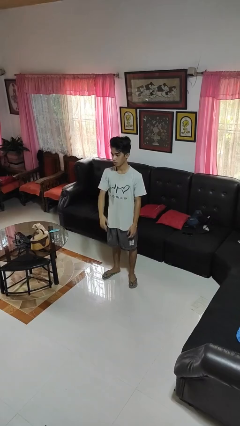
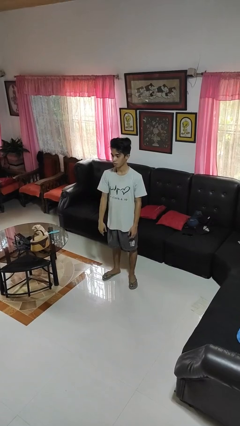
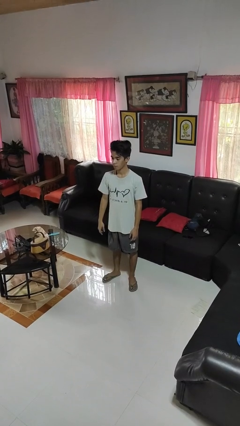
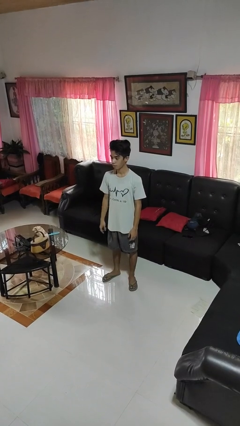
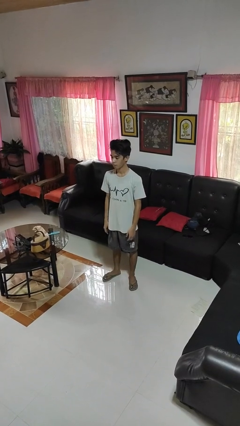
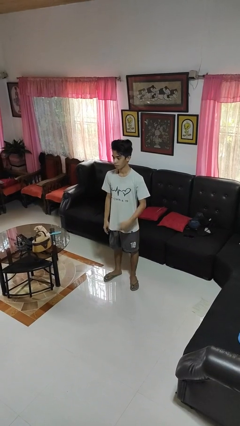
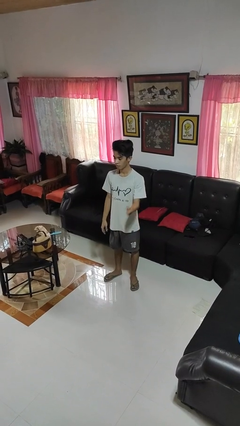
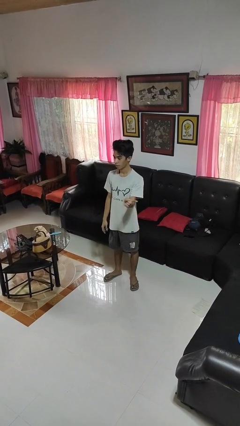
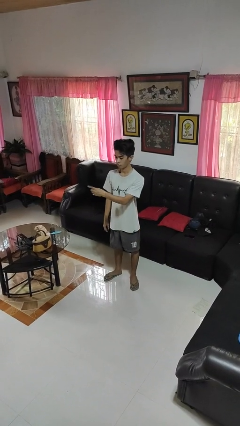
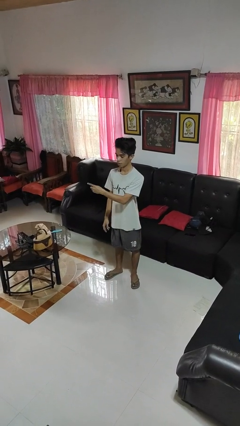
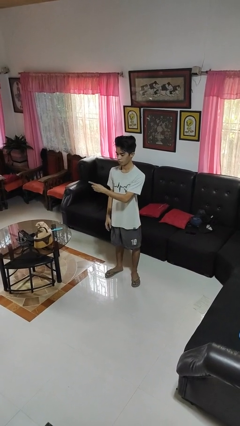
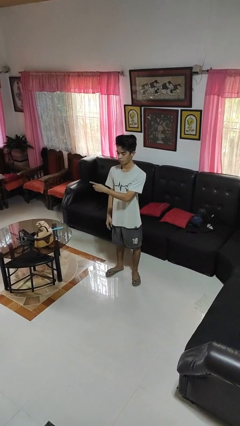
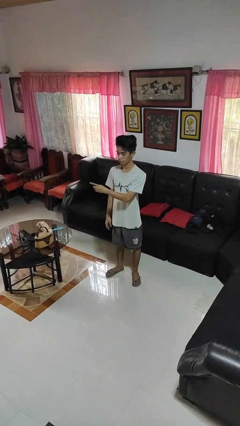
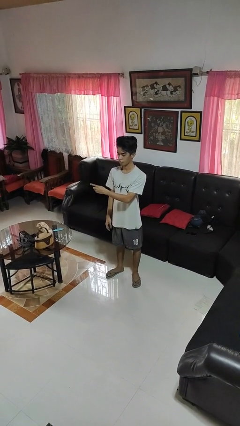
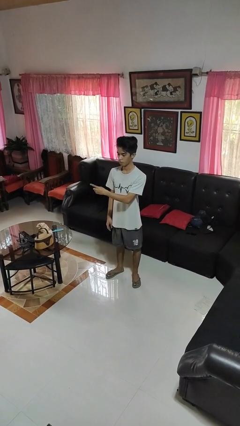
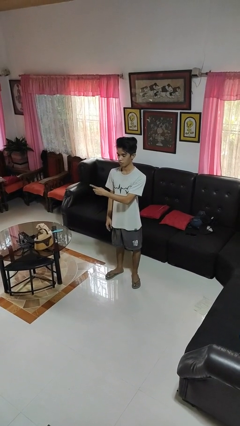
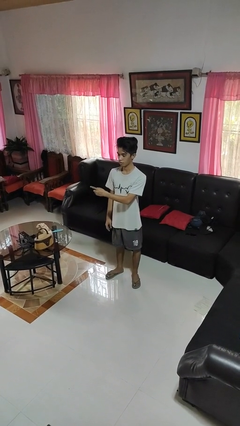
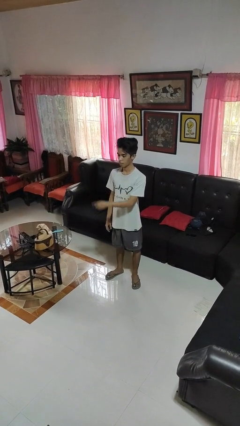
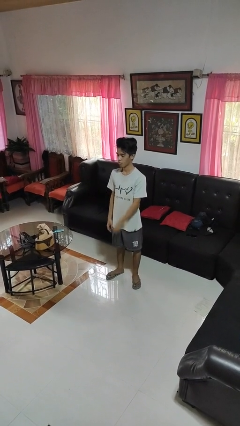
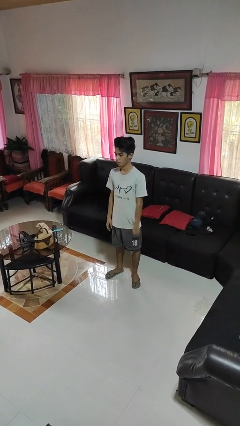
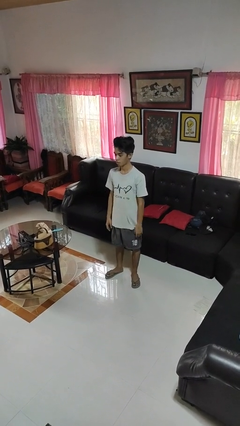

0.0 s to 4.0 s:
person gestures swipe right

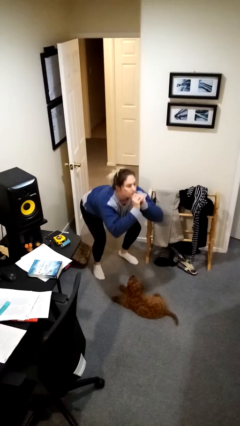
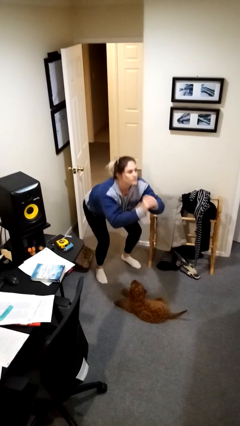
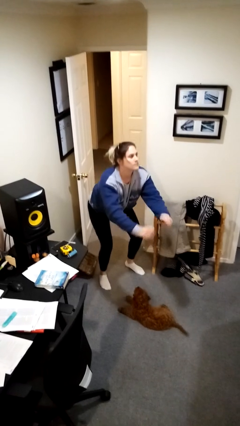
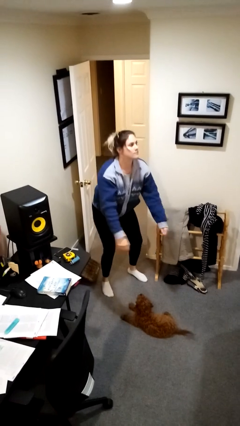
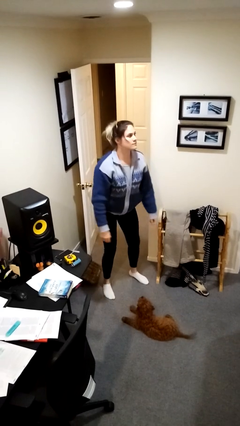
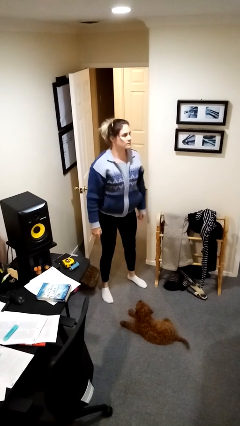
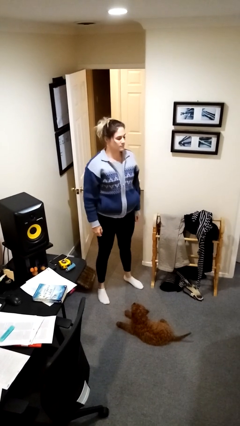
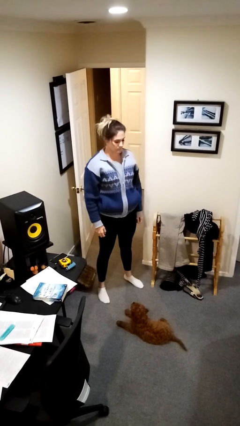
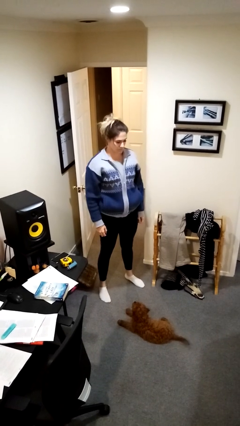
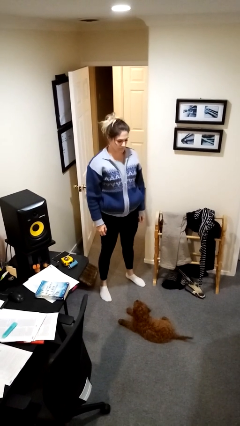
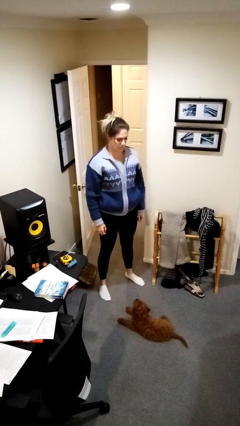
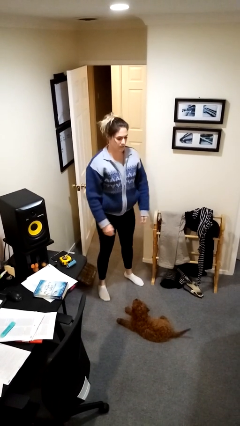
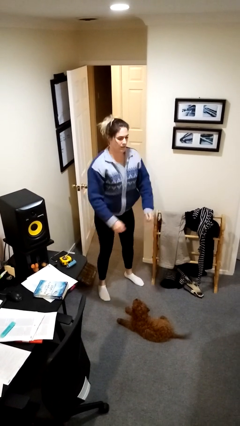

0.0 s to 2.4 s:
person stands up

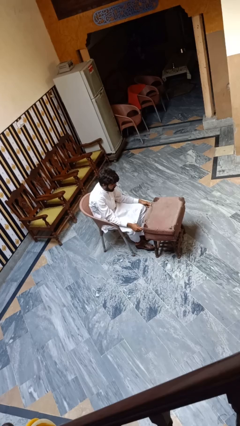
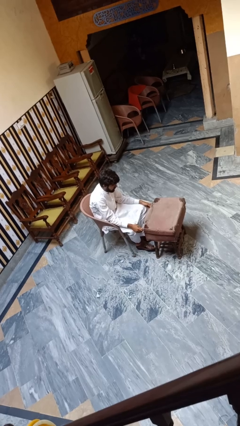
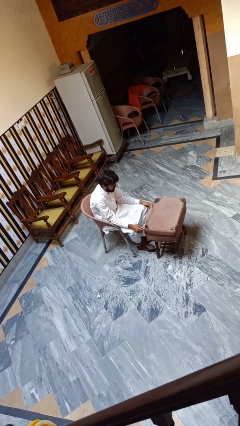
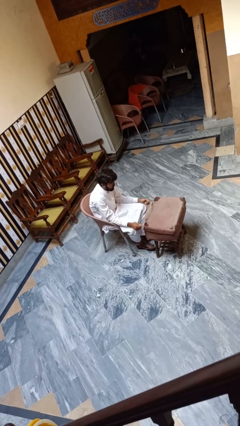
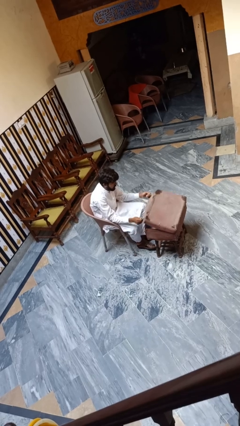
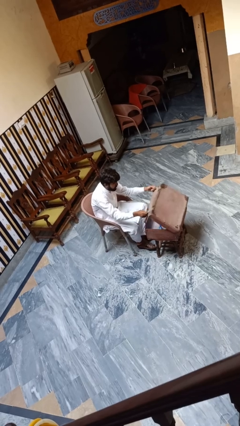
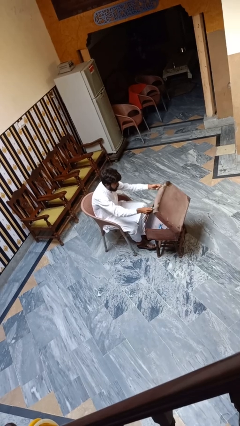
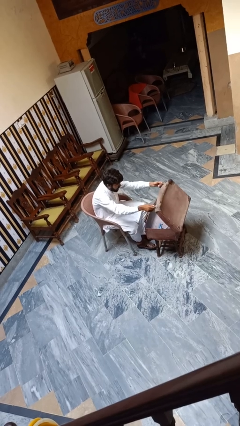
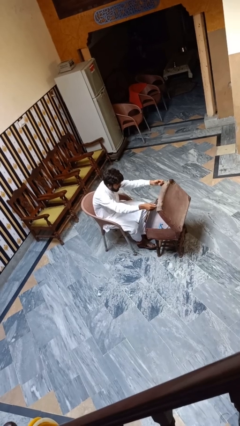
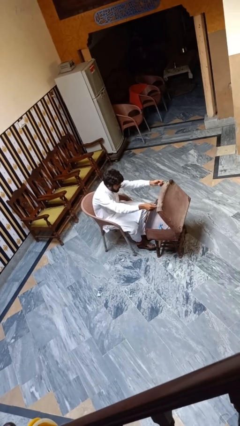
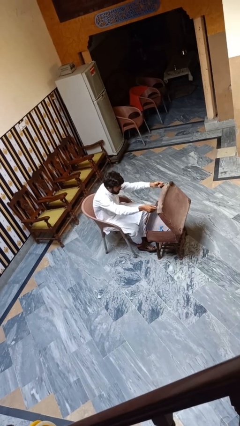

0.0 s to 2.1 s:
person opens suitcase

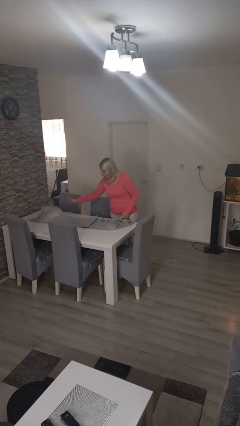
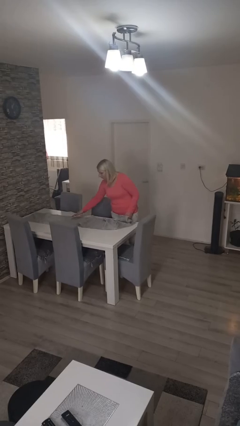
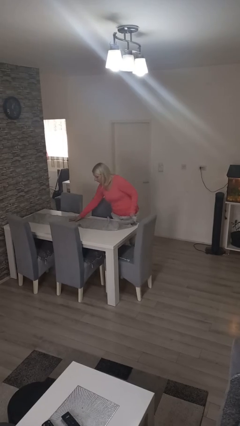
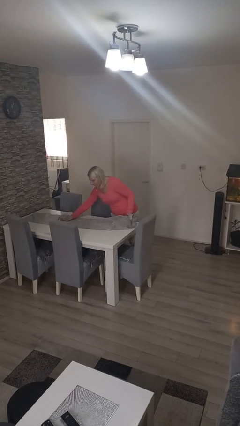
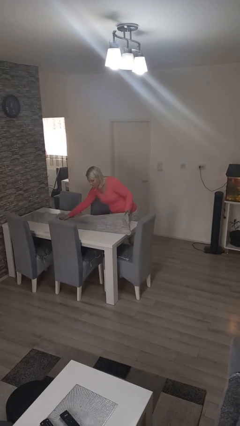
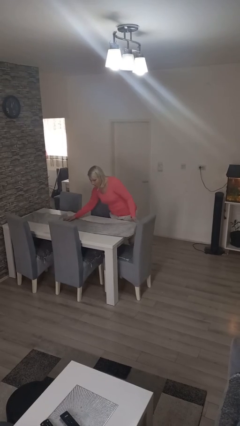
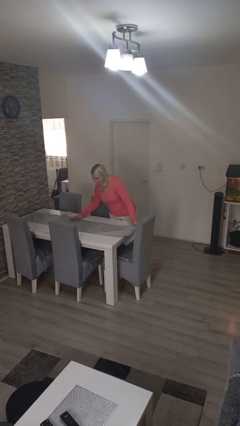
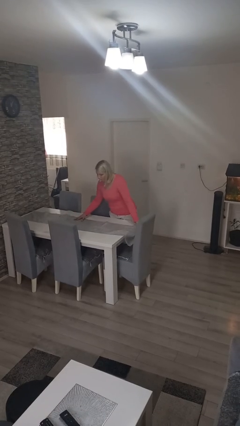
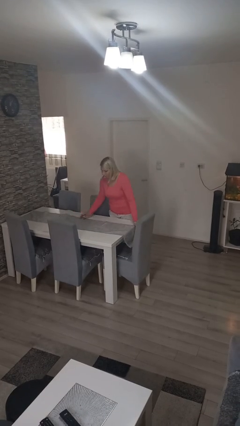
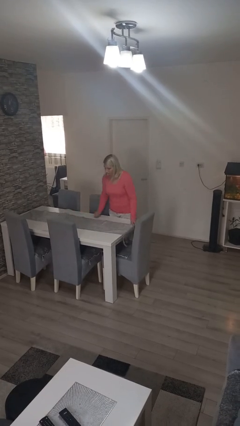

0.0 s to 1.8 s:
person spreads tablecloth

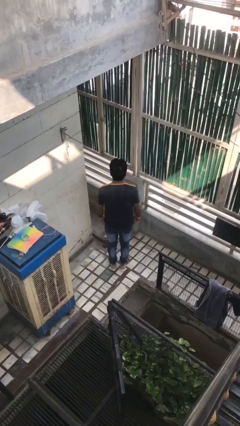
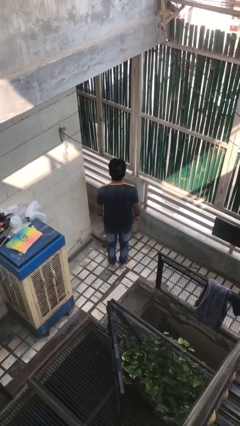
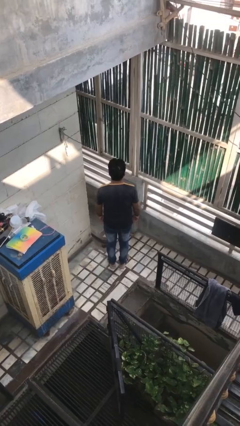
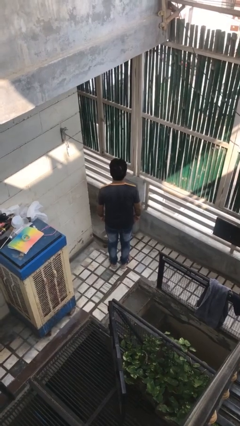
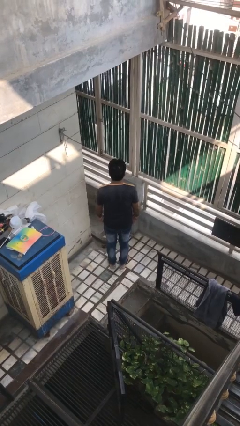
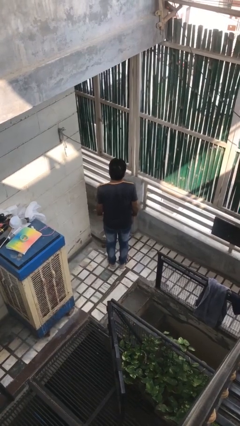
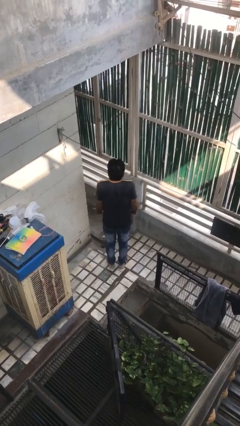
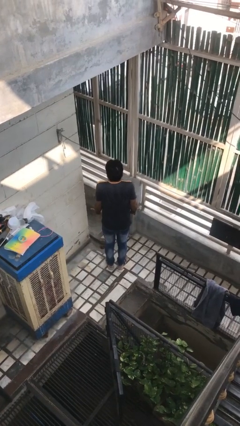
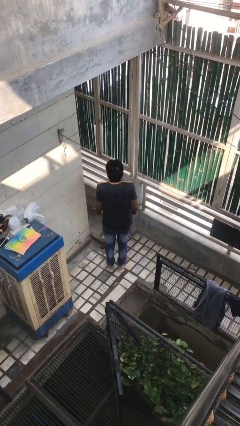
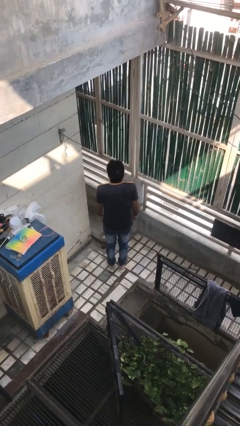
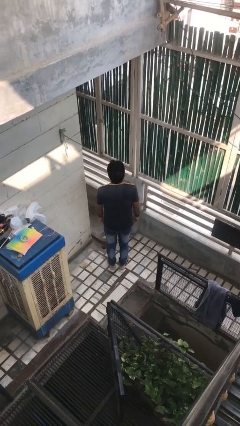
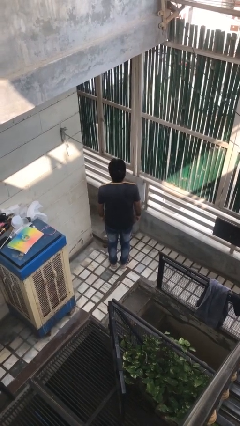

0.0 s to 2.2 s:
person shrugs

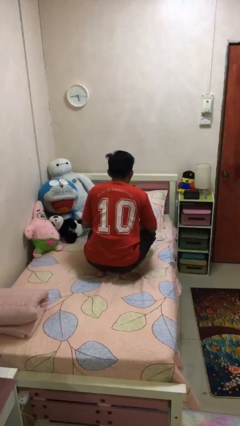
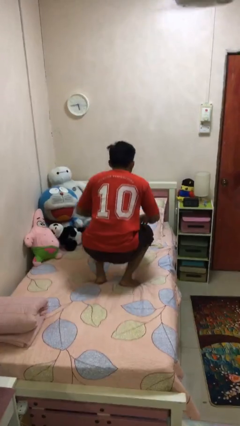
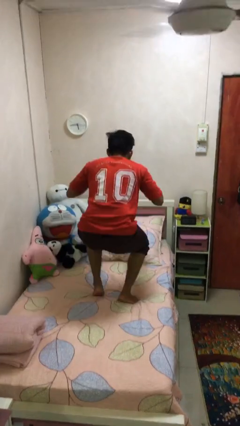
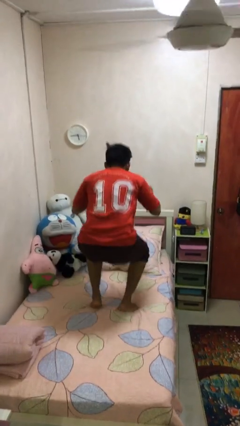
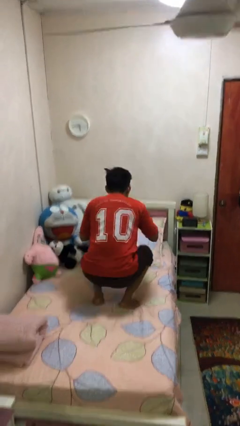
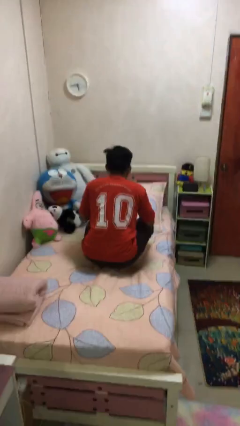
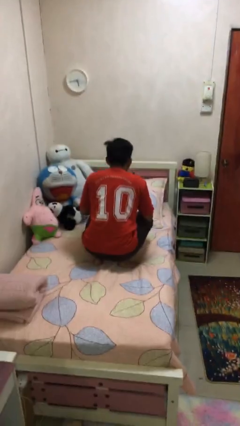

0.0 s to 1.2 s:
person jumps on bed

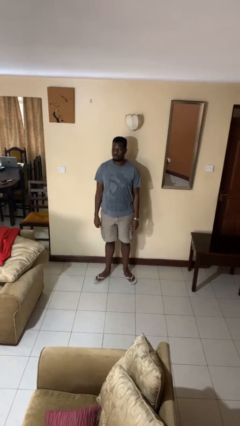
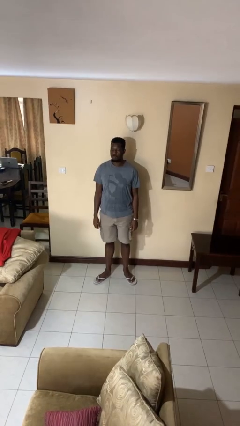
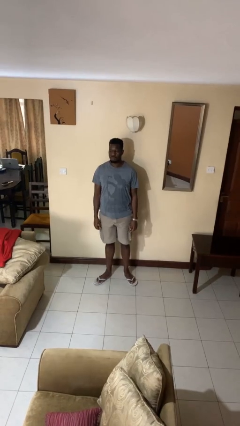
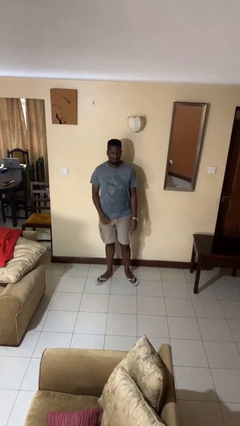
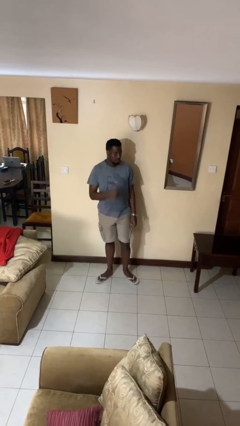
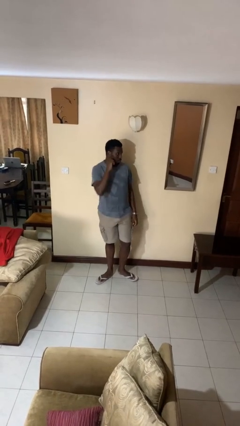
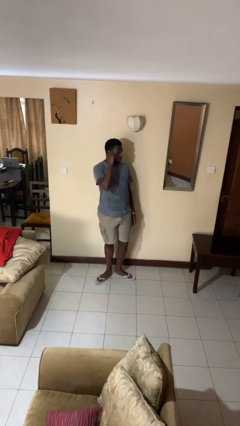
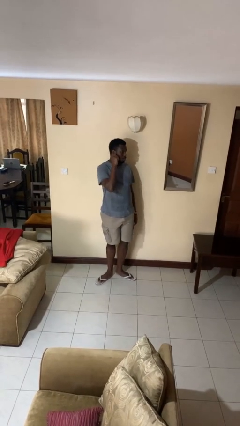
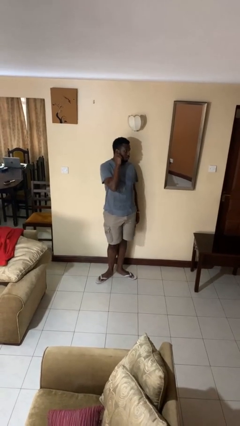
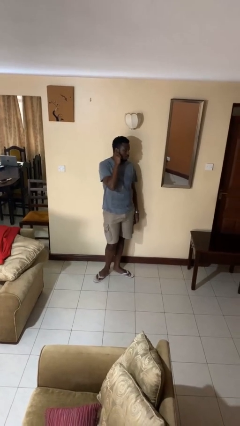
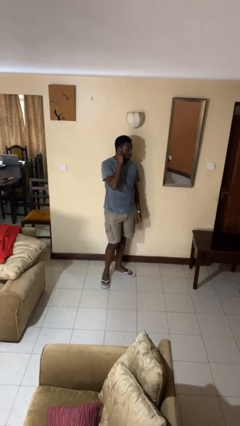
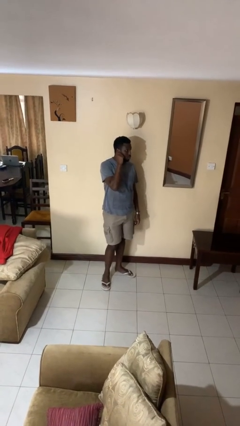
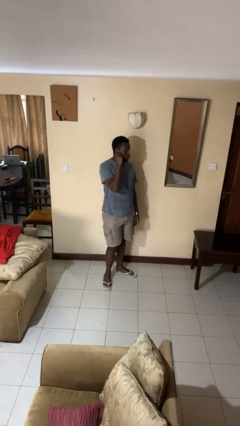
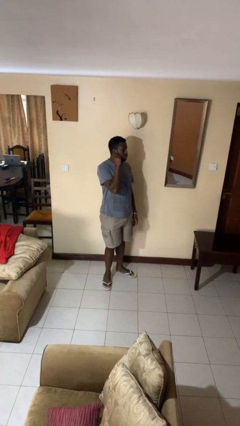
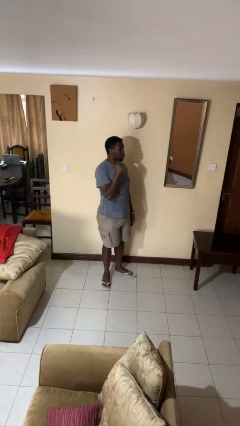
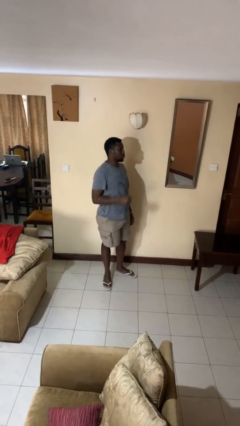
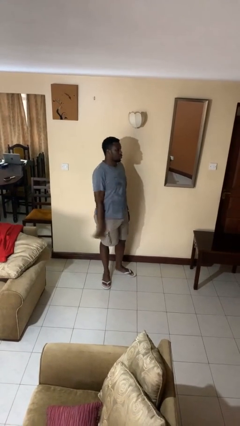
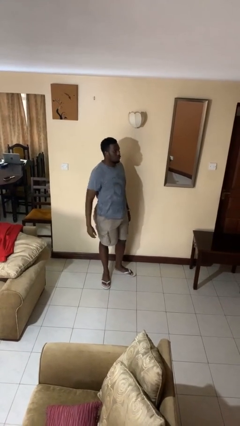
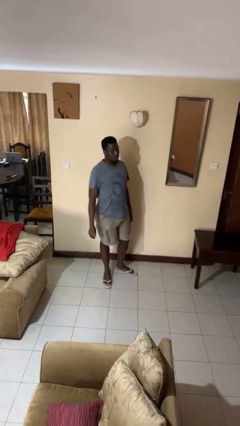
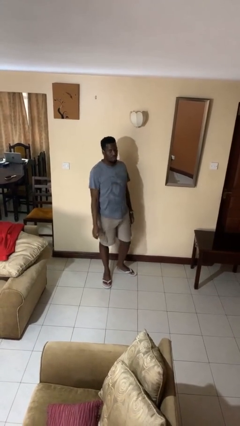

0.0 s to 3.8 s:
person touches earlobe
